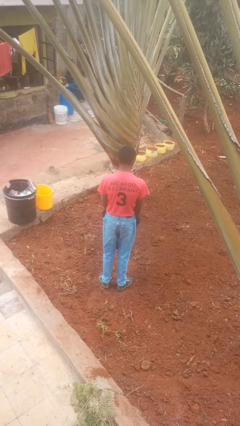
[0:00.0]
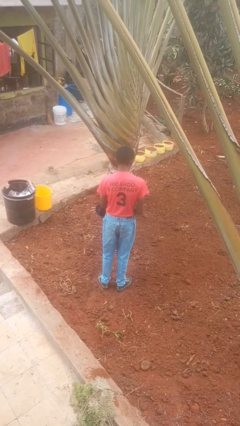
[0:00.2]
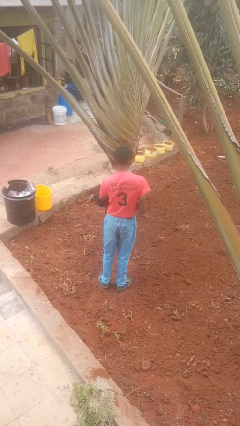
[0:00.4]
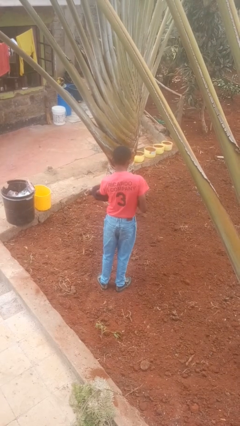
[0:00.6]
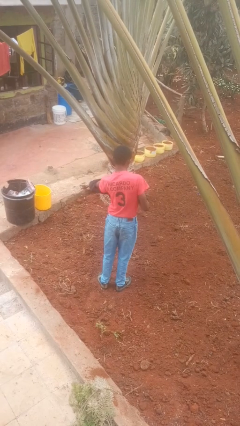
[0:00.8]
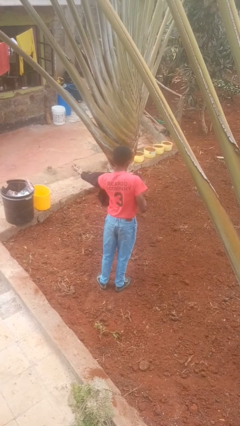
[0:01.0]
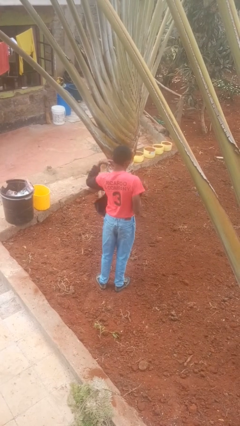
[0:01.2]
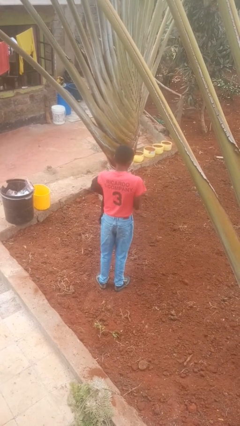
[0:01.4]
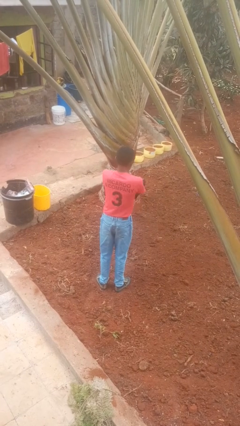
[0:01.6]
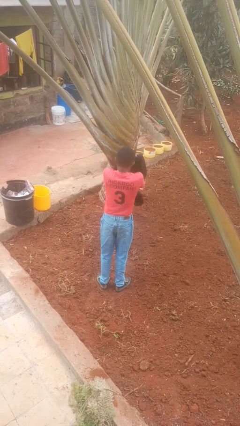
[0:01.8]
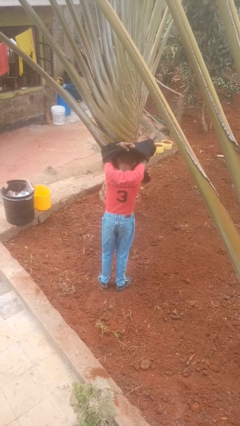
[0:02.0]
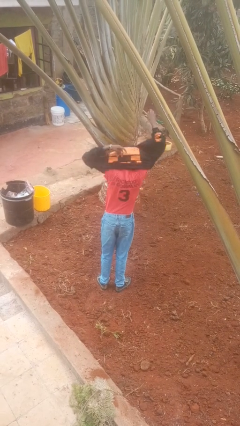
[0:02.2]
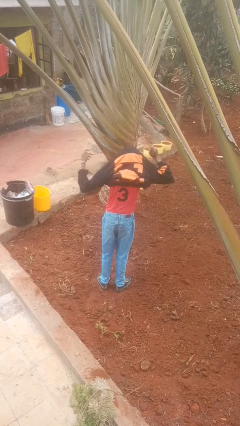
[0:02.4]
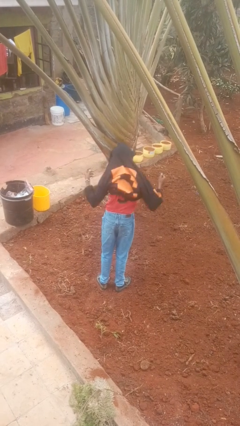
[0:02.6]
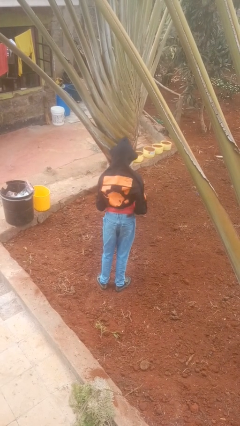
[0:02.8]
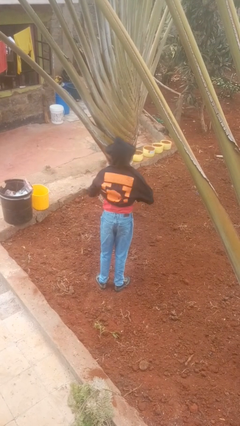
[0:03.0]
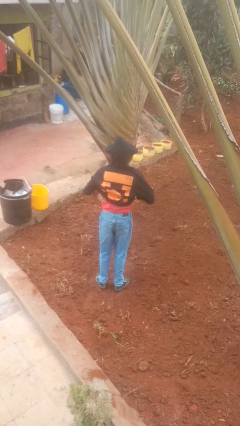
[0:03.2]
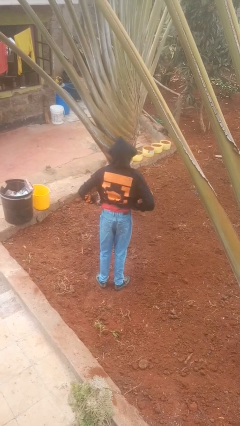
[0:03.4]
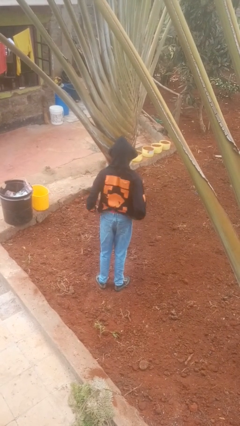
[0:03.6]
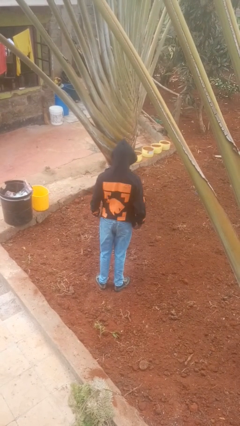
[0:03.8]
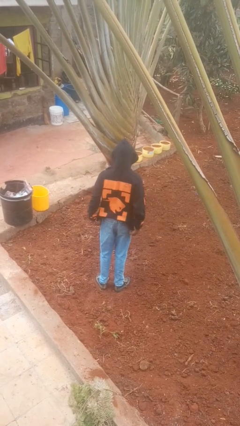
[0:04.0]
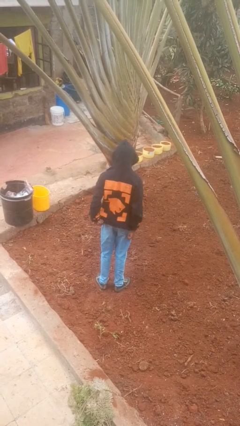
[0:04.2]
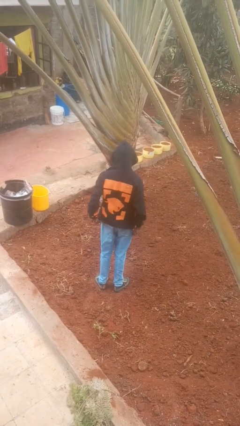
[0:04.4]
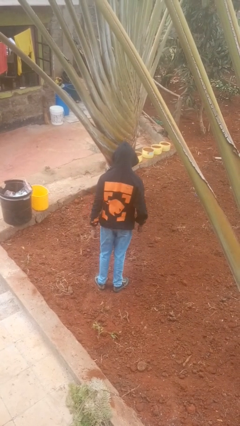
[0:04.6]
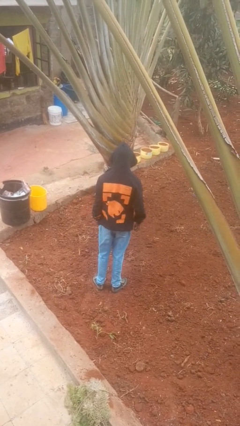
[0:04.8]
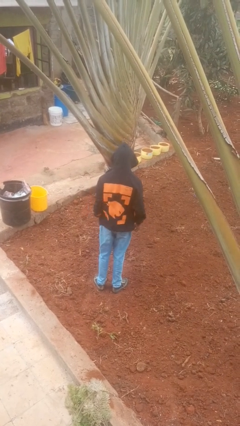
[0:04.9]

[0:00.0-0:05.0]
person puts on hoodie

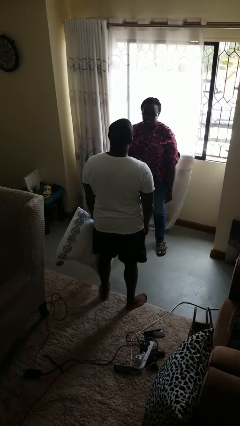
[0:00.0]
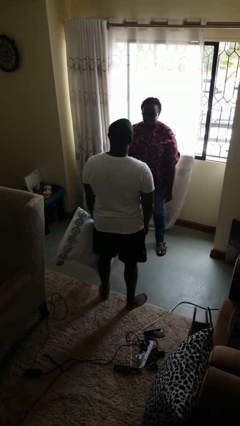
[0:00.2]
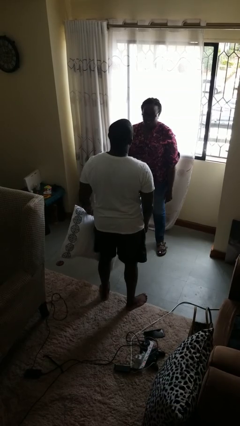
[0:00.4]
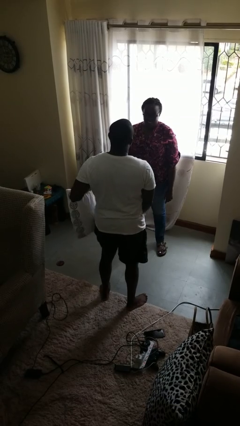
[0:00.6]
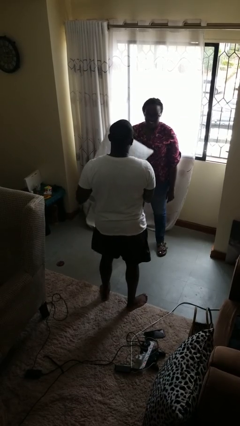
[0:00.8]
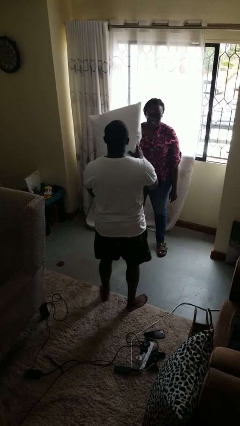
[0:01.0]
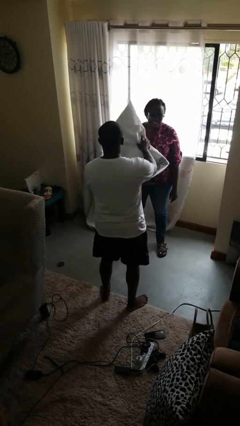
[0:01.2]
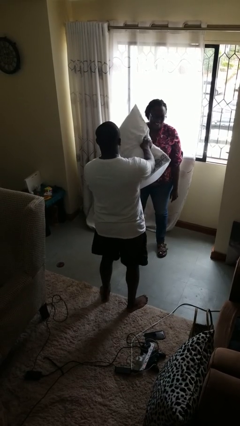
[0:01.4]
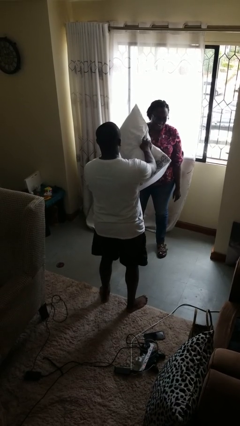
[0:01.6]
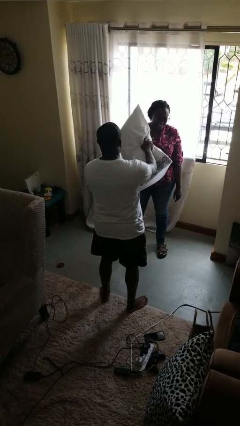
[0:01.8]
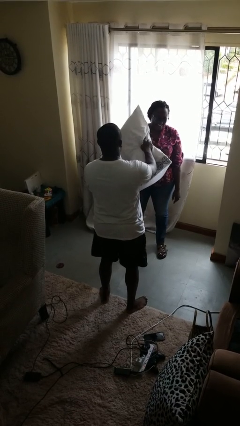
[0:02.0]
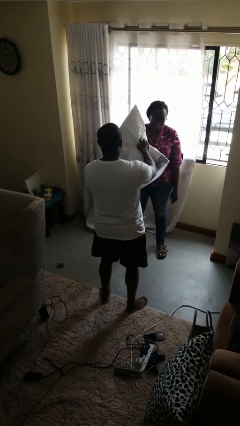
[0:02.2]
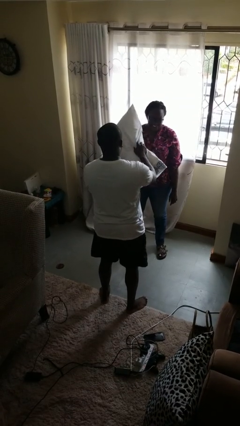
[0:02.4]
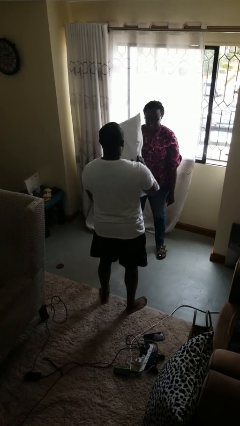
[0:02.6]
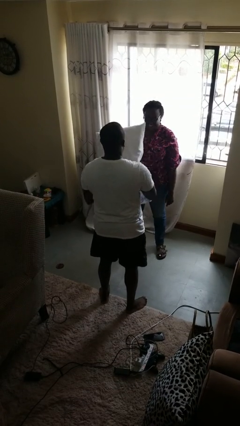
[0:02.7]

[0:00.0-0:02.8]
person hits person with pillow

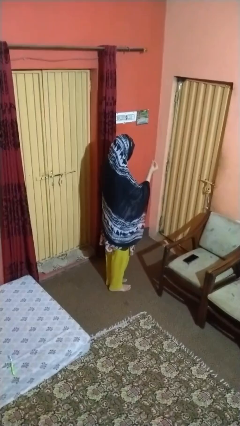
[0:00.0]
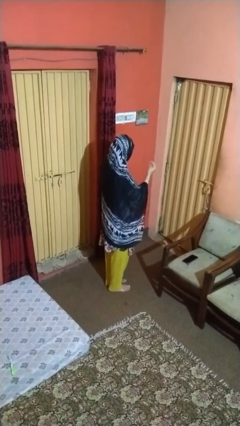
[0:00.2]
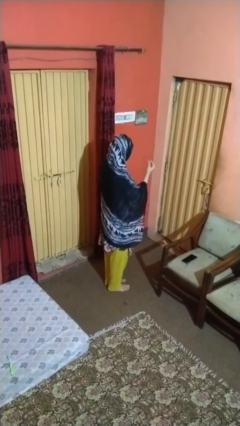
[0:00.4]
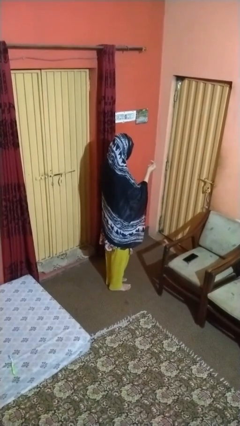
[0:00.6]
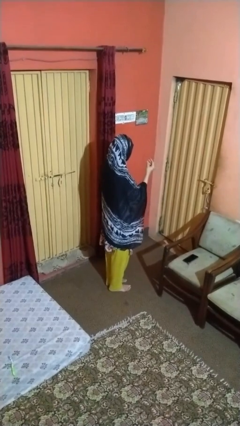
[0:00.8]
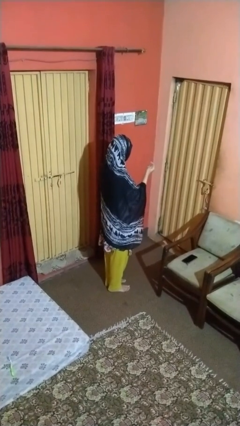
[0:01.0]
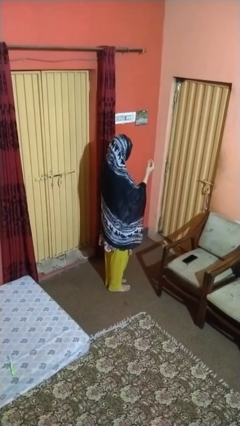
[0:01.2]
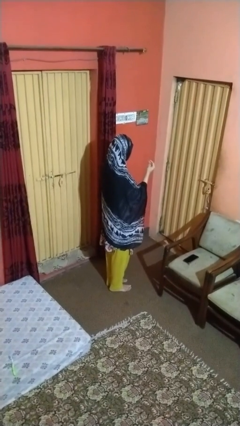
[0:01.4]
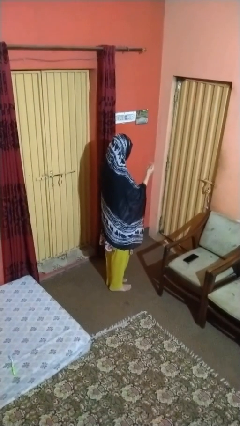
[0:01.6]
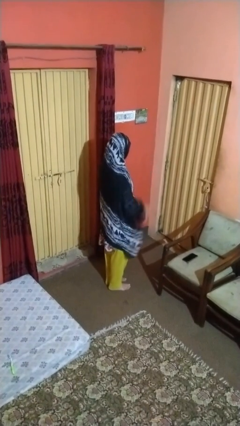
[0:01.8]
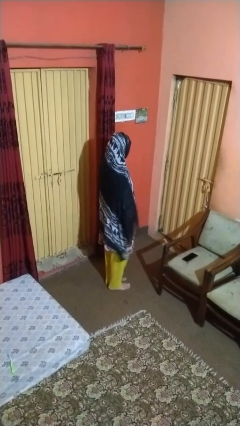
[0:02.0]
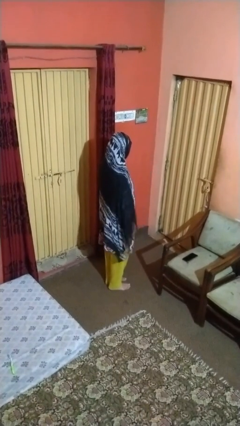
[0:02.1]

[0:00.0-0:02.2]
person snaps fingers

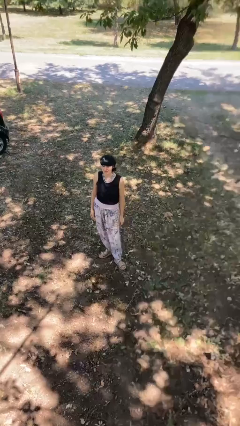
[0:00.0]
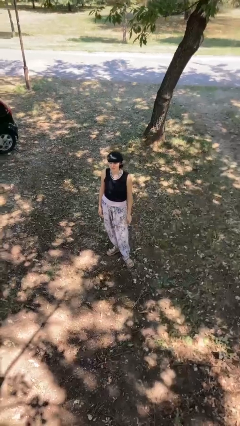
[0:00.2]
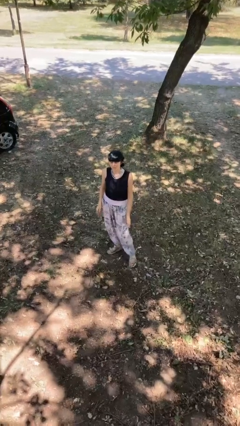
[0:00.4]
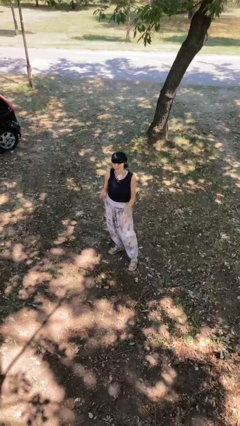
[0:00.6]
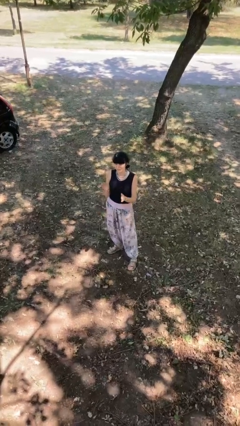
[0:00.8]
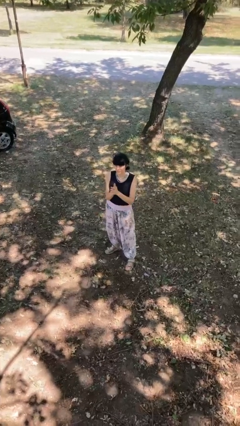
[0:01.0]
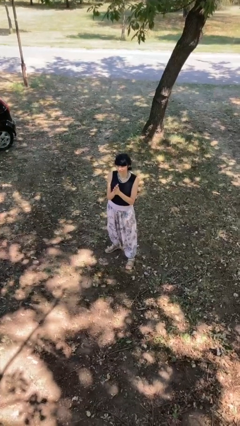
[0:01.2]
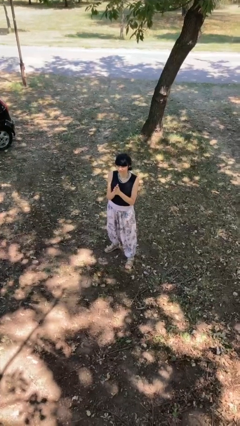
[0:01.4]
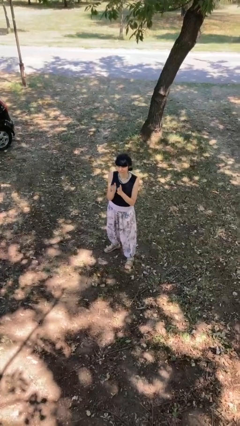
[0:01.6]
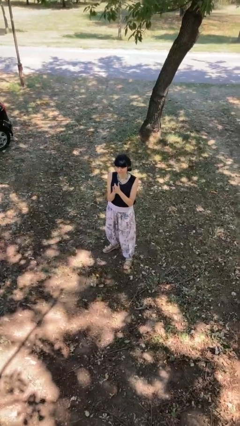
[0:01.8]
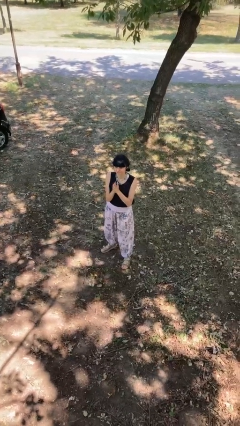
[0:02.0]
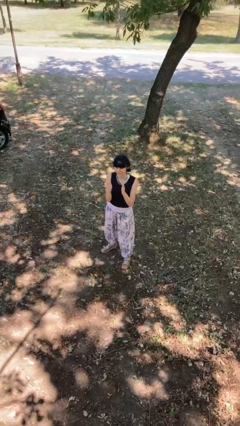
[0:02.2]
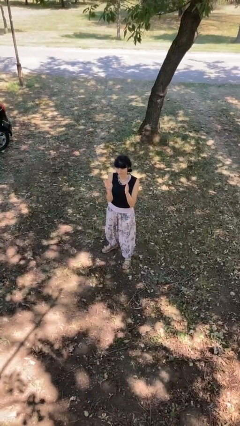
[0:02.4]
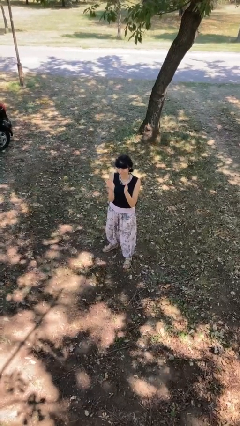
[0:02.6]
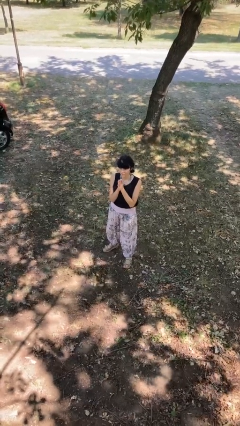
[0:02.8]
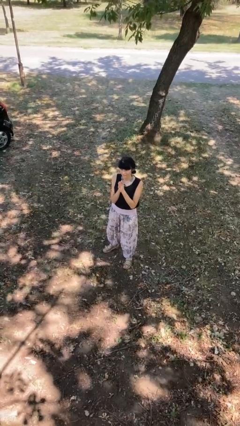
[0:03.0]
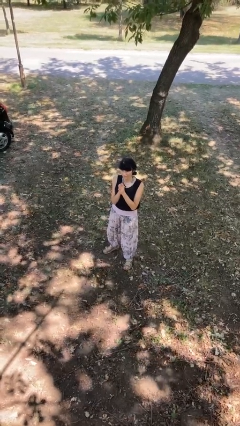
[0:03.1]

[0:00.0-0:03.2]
person claps hands

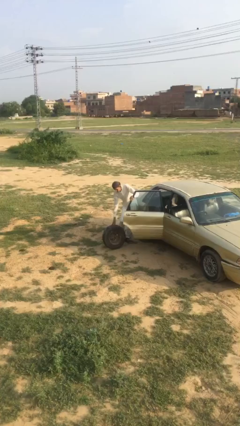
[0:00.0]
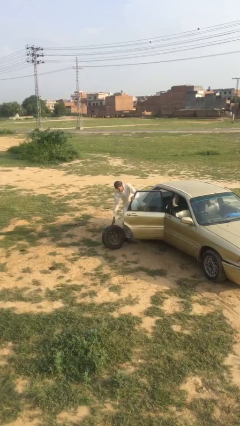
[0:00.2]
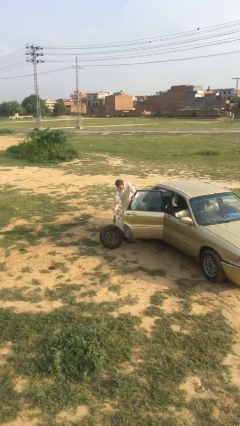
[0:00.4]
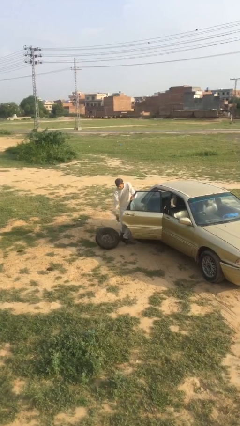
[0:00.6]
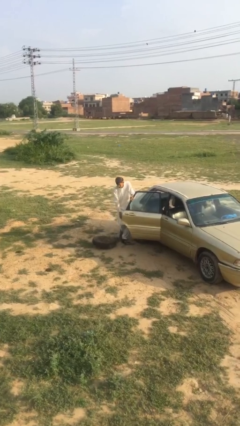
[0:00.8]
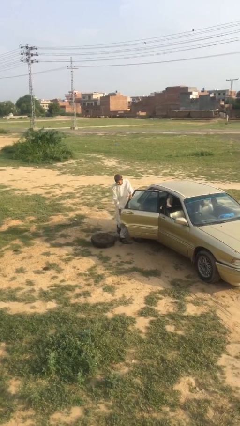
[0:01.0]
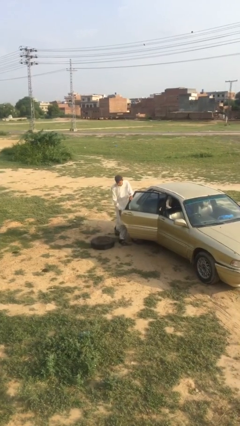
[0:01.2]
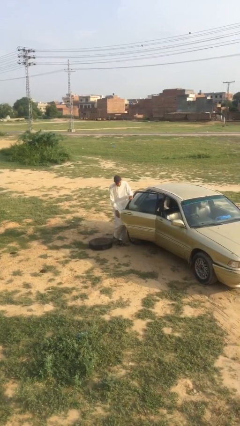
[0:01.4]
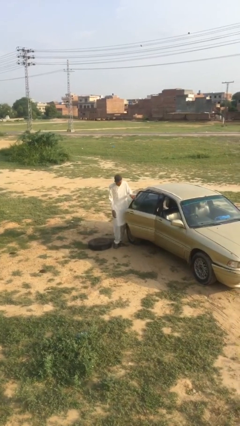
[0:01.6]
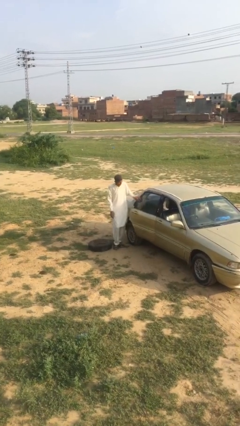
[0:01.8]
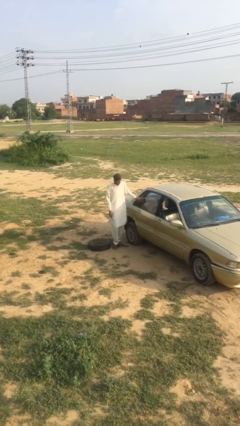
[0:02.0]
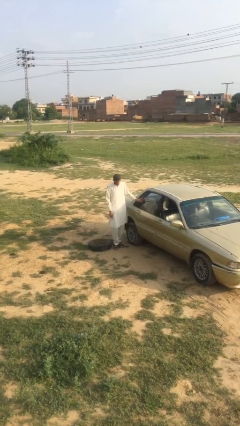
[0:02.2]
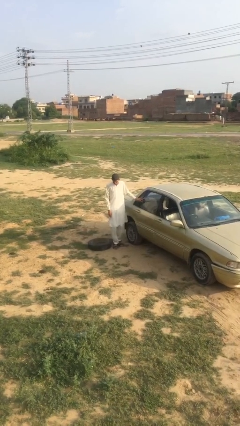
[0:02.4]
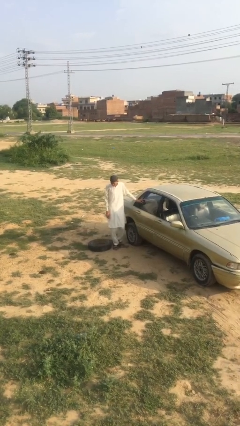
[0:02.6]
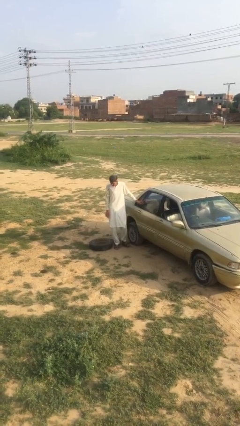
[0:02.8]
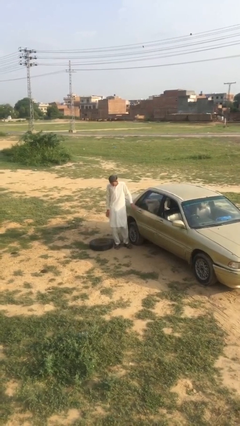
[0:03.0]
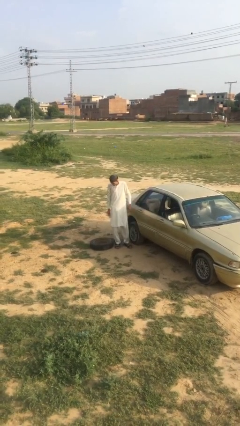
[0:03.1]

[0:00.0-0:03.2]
person closes car door

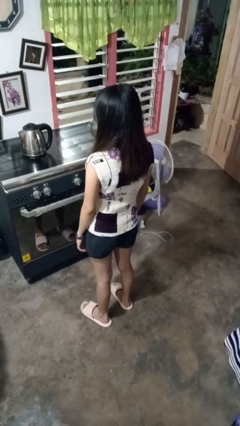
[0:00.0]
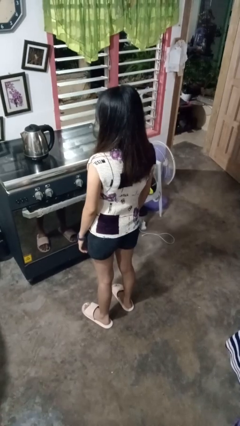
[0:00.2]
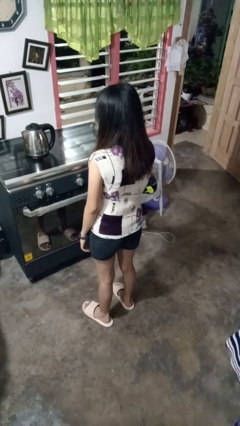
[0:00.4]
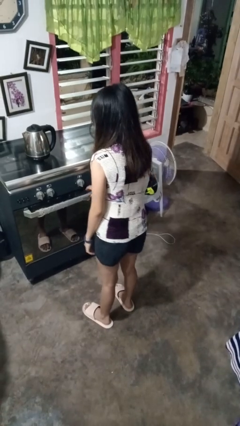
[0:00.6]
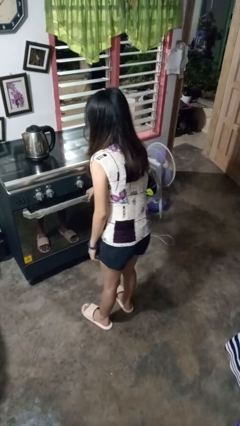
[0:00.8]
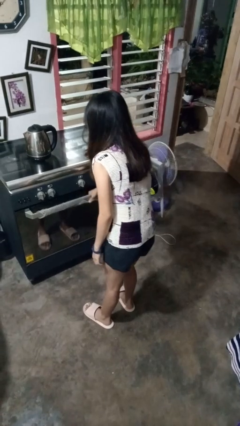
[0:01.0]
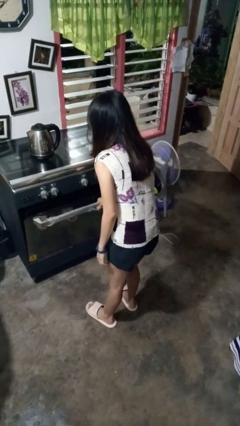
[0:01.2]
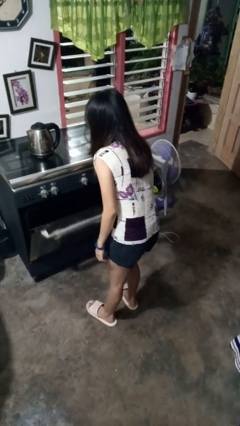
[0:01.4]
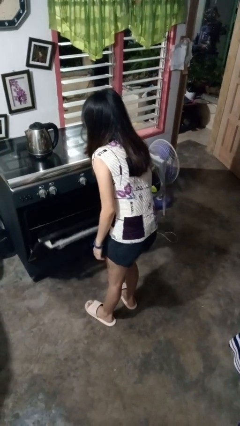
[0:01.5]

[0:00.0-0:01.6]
person opens oven door
